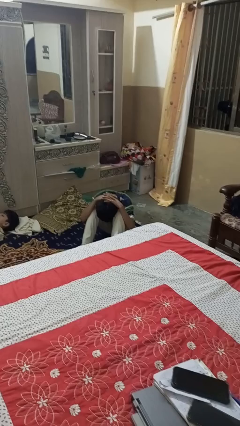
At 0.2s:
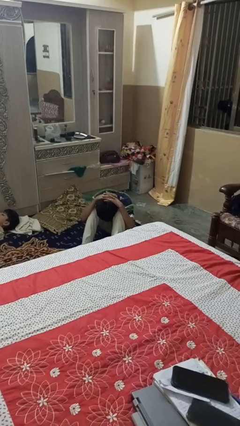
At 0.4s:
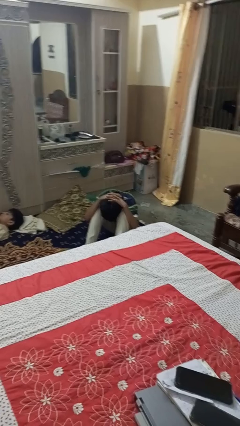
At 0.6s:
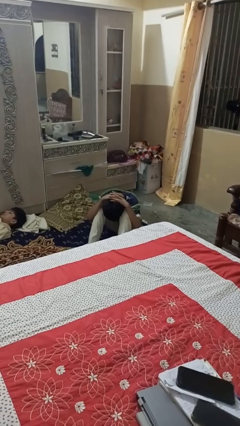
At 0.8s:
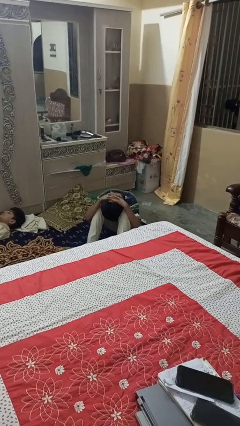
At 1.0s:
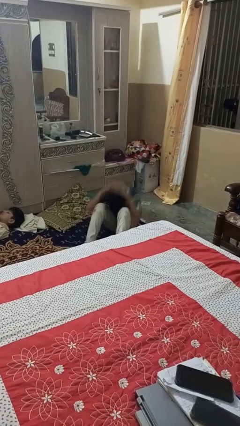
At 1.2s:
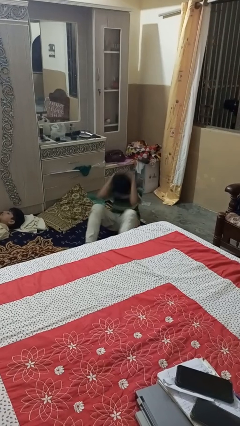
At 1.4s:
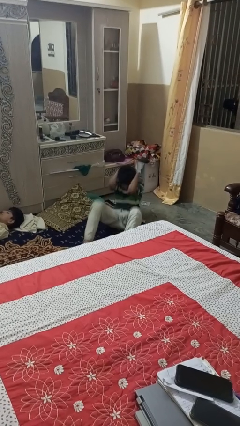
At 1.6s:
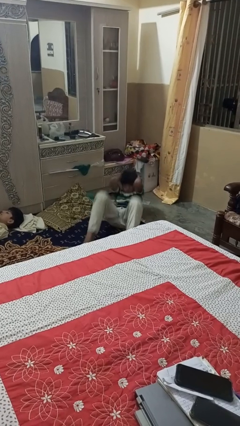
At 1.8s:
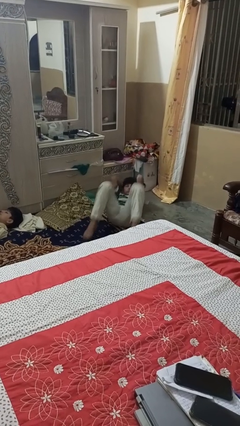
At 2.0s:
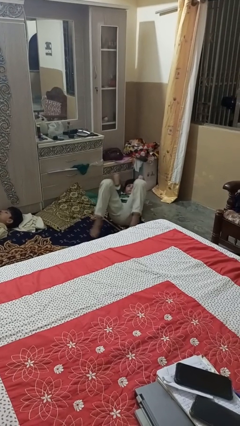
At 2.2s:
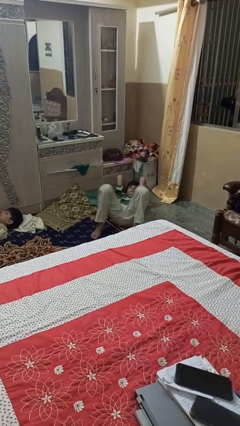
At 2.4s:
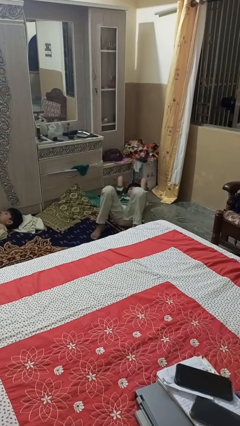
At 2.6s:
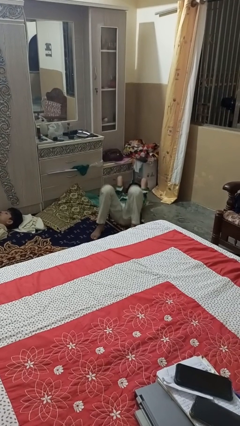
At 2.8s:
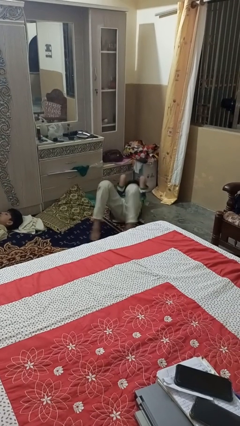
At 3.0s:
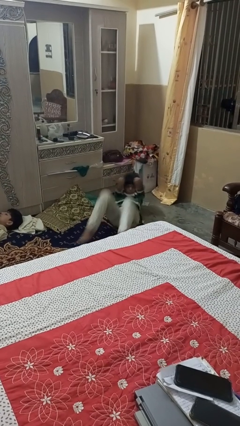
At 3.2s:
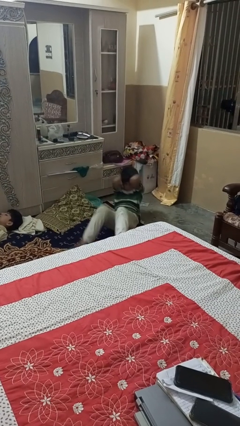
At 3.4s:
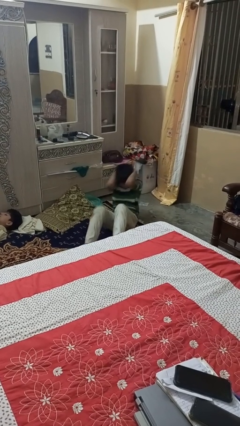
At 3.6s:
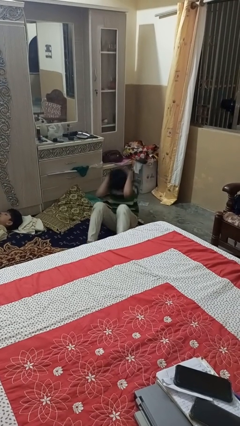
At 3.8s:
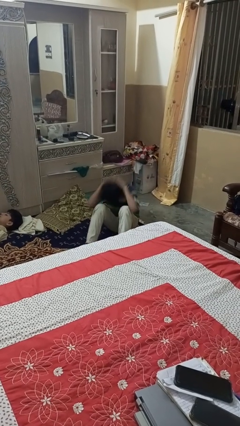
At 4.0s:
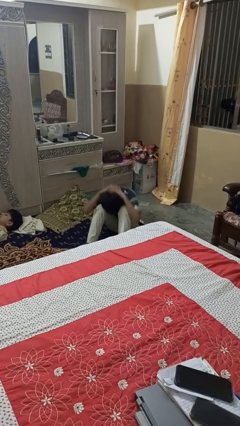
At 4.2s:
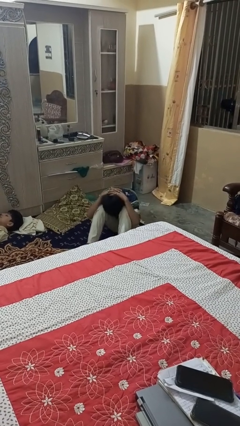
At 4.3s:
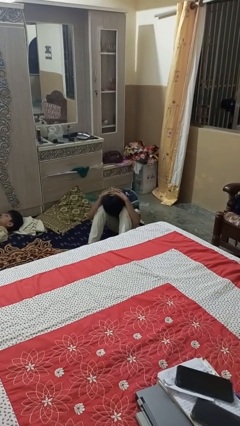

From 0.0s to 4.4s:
person exercises with situp

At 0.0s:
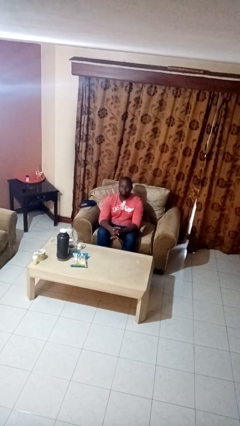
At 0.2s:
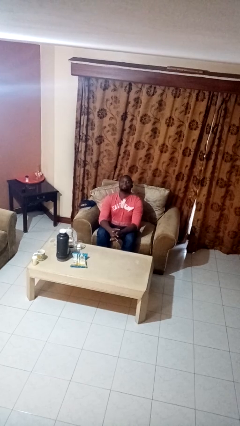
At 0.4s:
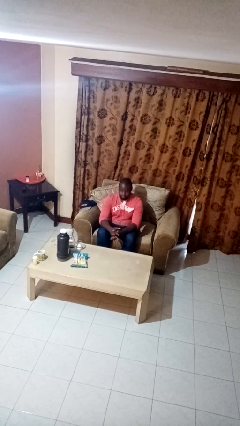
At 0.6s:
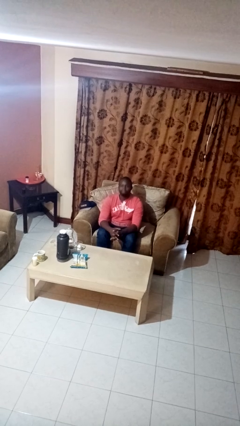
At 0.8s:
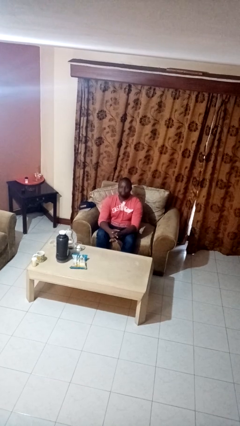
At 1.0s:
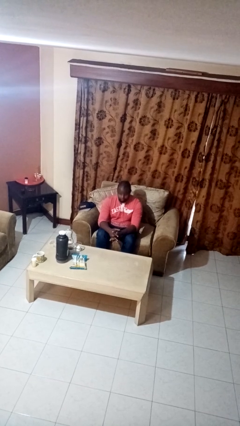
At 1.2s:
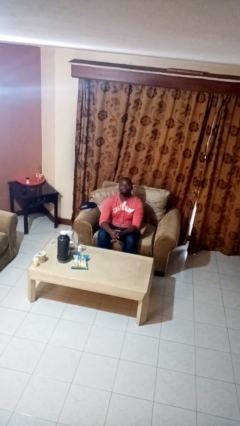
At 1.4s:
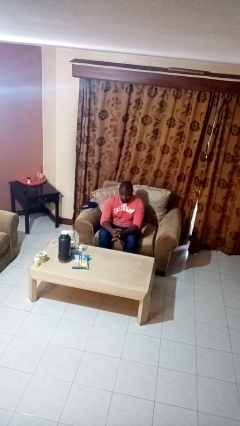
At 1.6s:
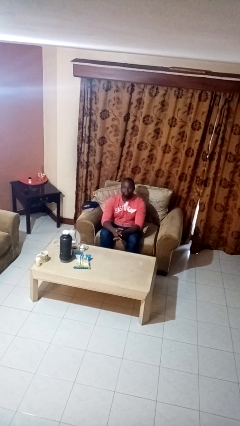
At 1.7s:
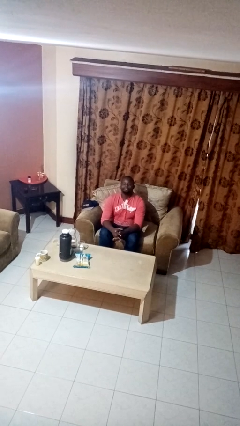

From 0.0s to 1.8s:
person nods head

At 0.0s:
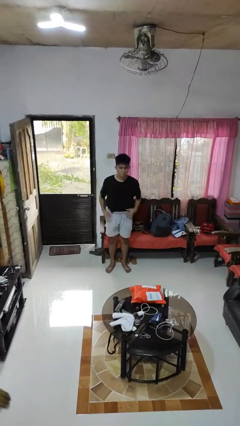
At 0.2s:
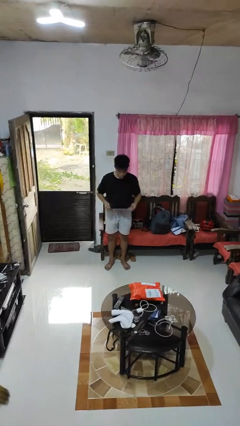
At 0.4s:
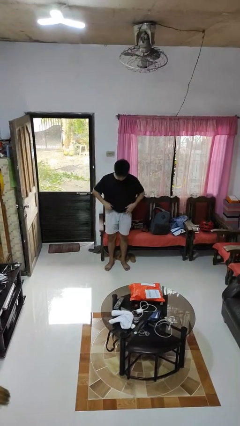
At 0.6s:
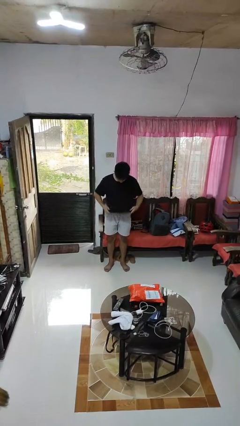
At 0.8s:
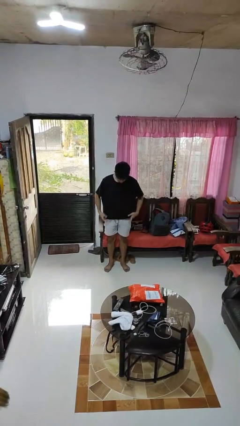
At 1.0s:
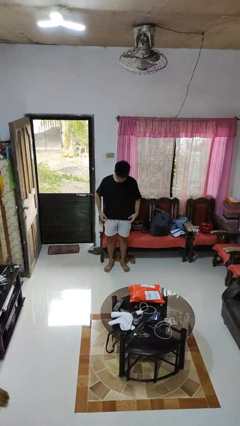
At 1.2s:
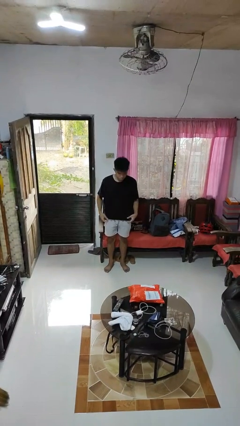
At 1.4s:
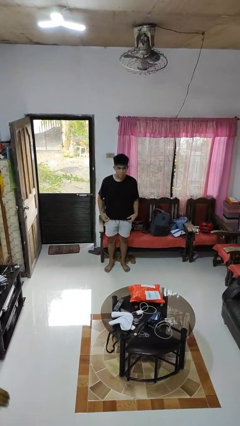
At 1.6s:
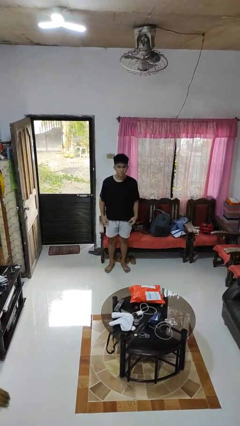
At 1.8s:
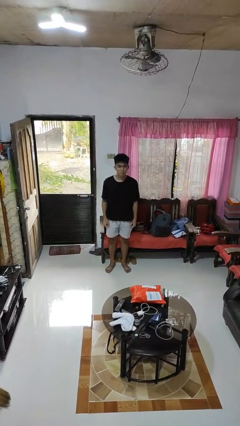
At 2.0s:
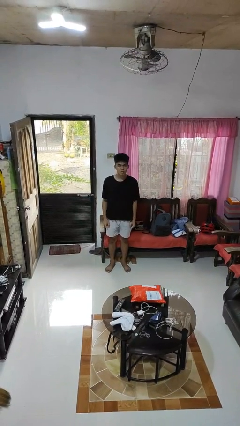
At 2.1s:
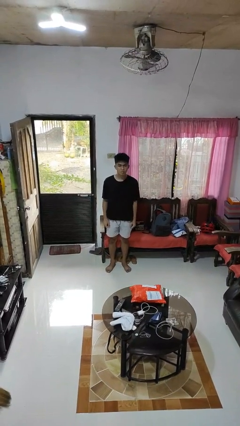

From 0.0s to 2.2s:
person untucks shirt

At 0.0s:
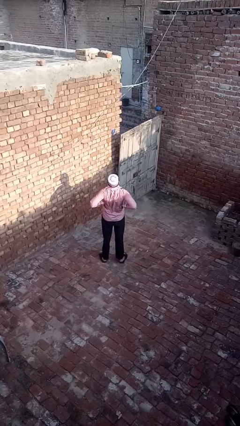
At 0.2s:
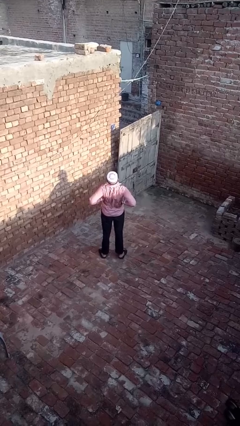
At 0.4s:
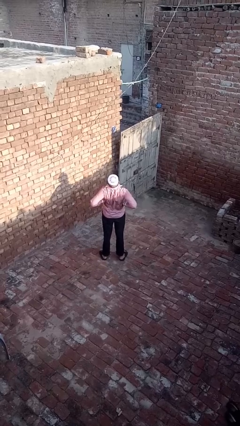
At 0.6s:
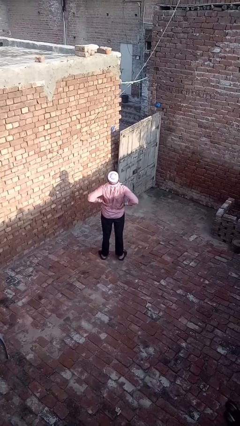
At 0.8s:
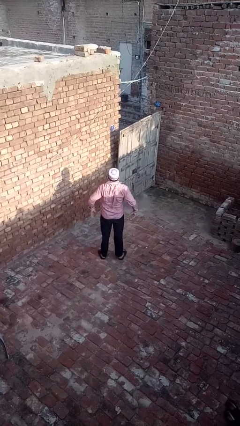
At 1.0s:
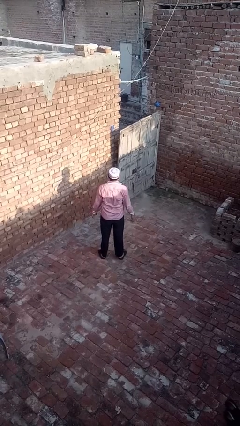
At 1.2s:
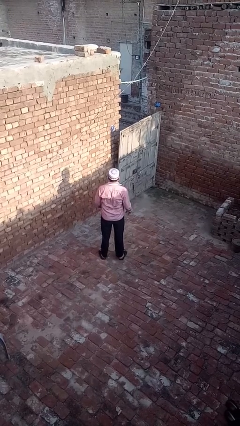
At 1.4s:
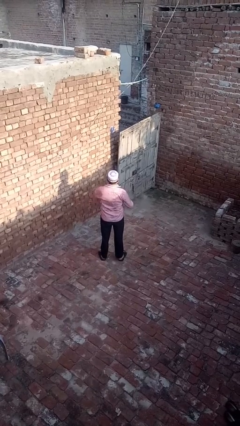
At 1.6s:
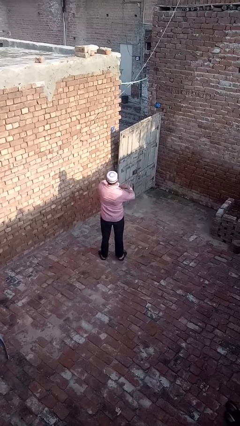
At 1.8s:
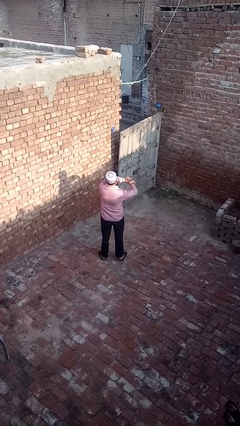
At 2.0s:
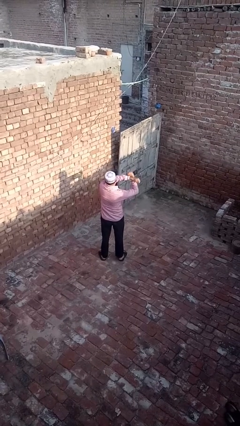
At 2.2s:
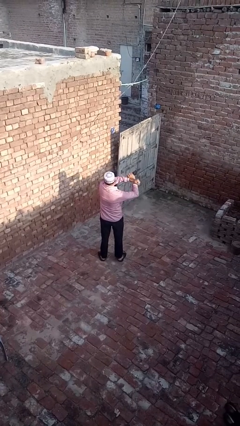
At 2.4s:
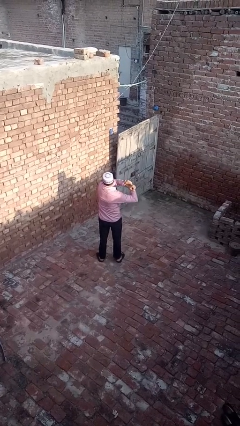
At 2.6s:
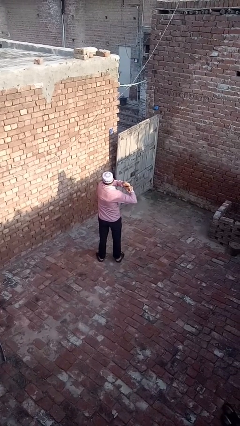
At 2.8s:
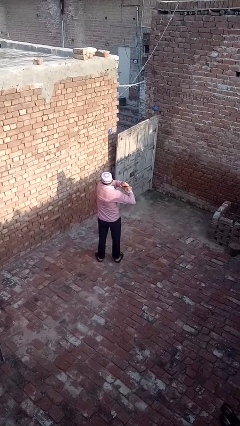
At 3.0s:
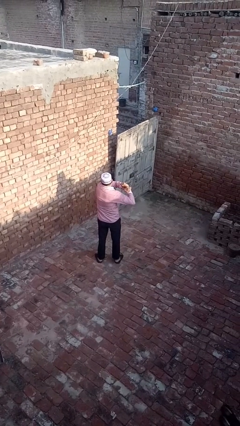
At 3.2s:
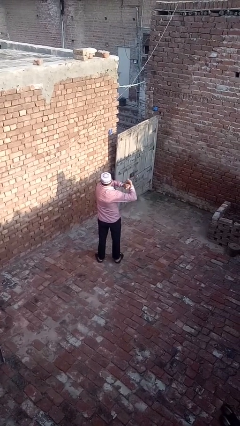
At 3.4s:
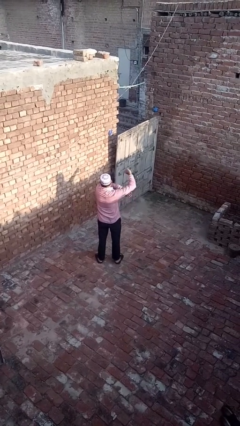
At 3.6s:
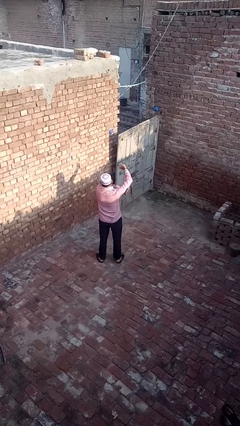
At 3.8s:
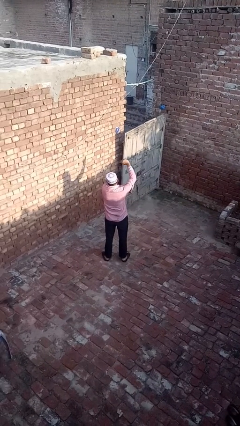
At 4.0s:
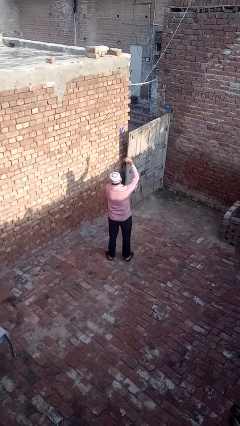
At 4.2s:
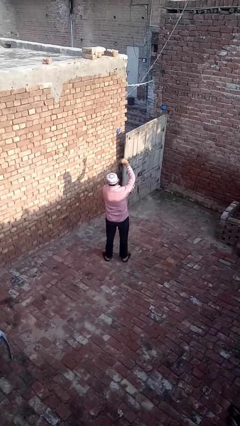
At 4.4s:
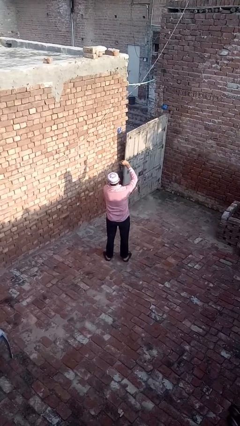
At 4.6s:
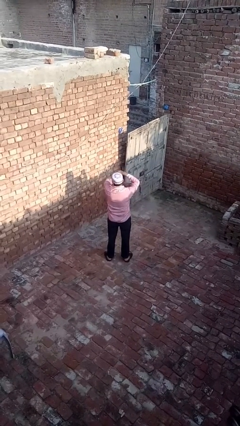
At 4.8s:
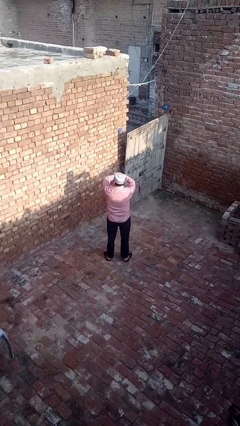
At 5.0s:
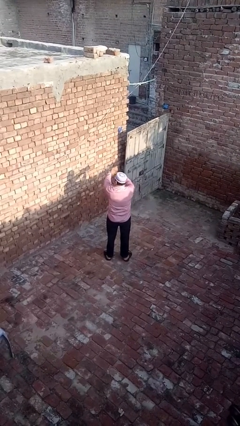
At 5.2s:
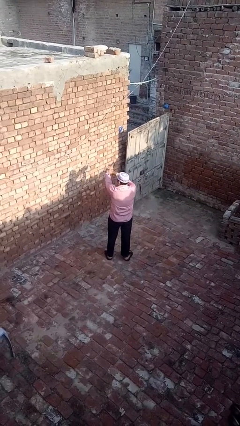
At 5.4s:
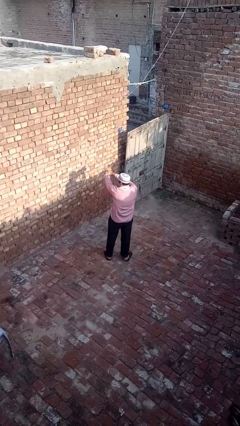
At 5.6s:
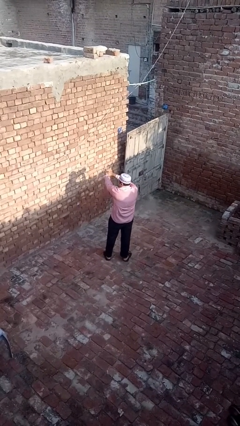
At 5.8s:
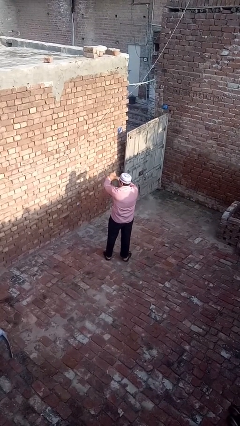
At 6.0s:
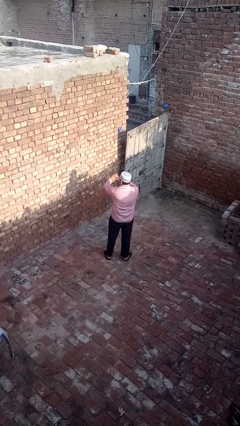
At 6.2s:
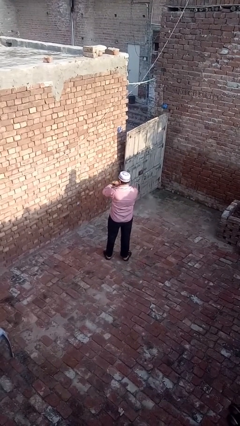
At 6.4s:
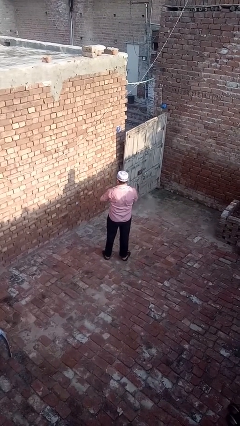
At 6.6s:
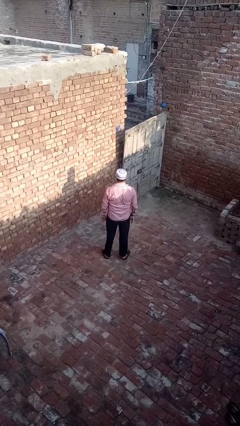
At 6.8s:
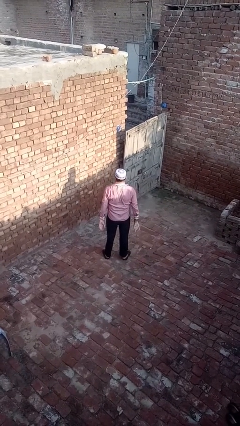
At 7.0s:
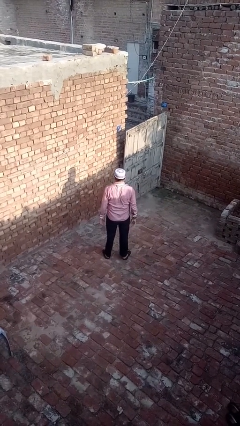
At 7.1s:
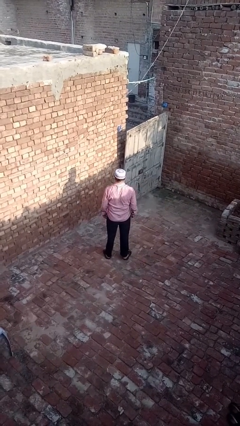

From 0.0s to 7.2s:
person stretches arms to side

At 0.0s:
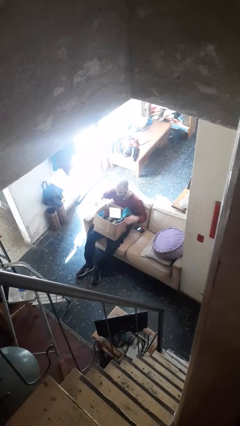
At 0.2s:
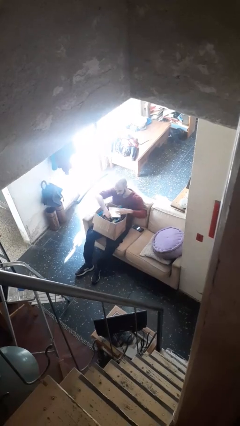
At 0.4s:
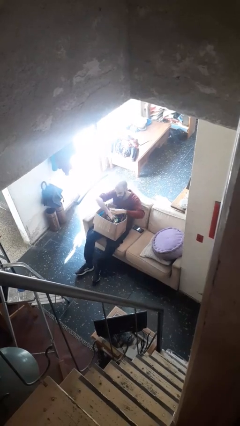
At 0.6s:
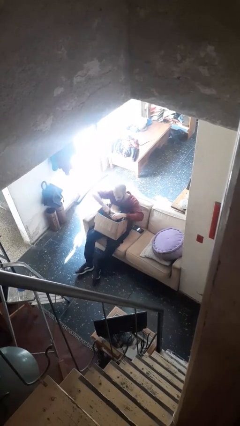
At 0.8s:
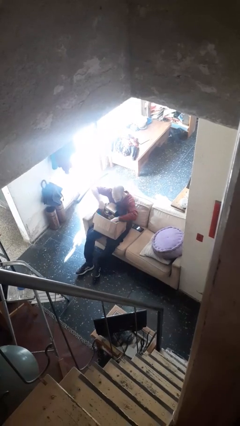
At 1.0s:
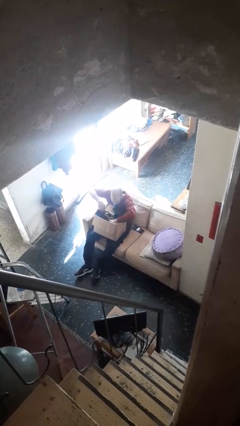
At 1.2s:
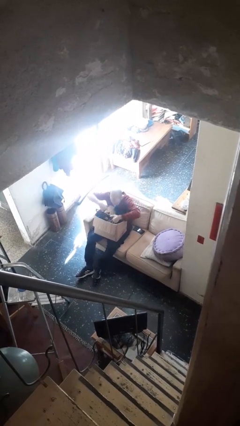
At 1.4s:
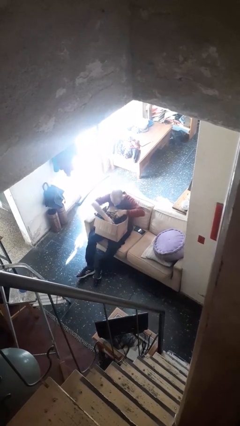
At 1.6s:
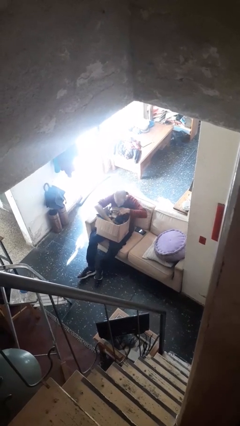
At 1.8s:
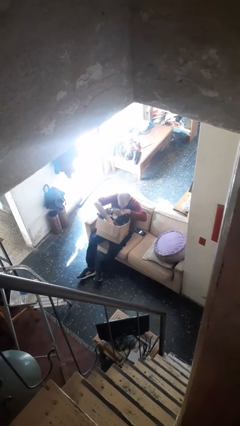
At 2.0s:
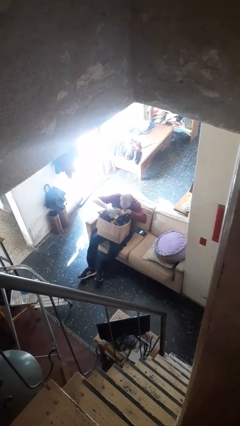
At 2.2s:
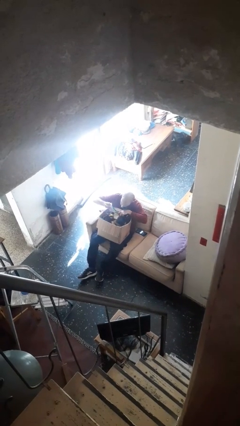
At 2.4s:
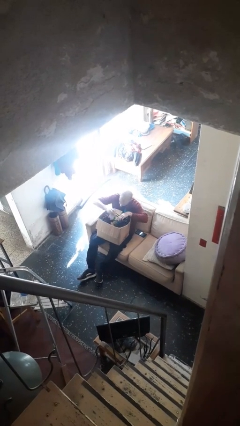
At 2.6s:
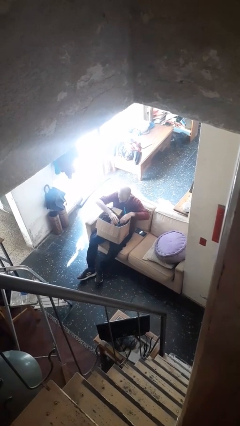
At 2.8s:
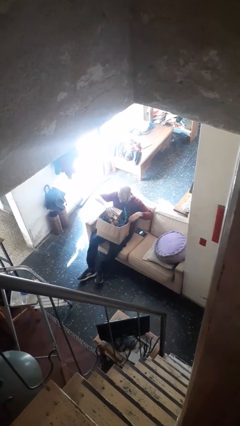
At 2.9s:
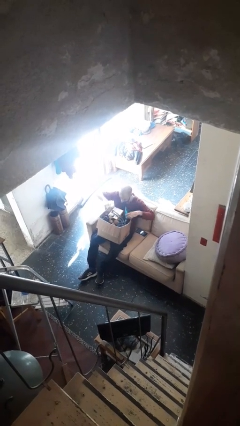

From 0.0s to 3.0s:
person searches in box
